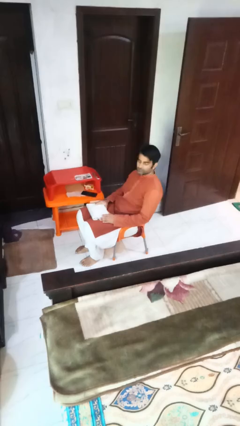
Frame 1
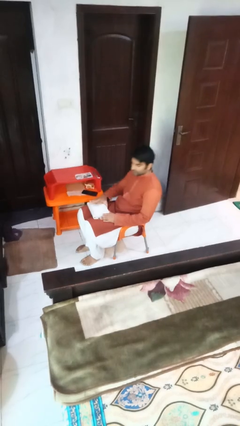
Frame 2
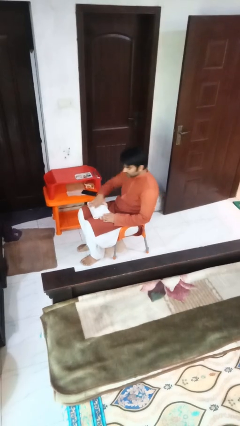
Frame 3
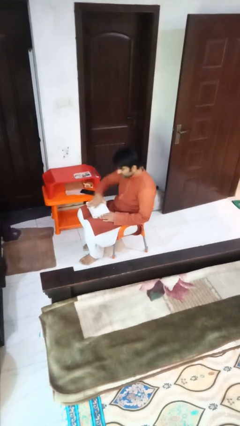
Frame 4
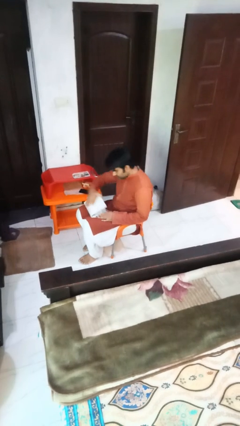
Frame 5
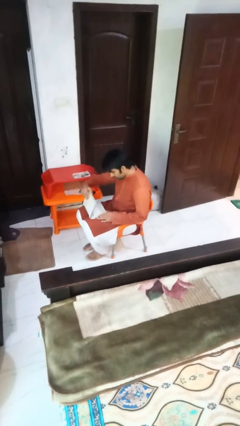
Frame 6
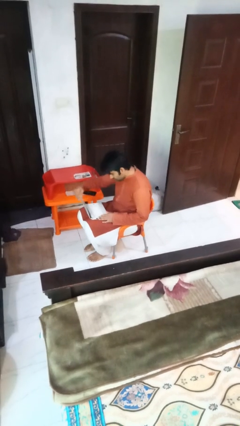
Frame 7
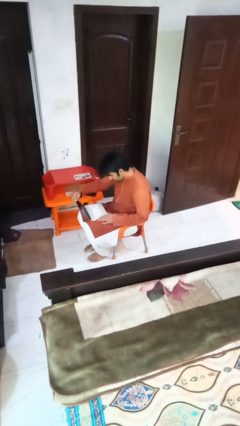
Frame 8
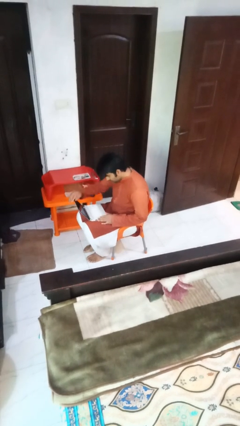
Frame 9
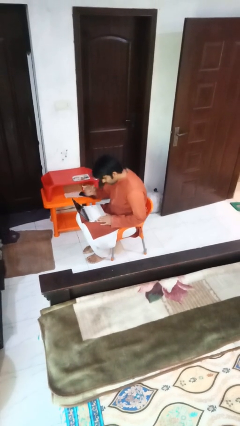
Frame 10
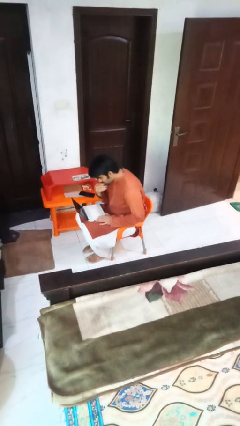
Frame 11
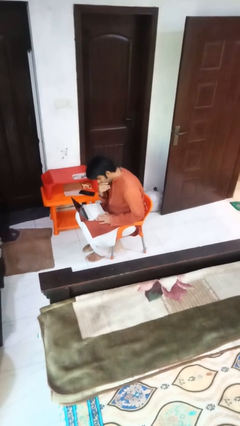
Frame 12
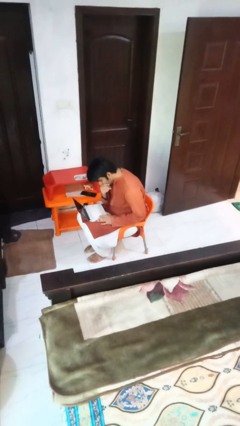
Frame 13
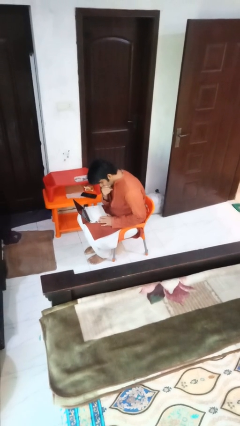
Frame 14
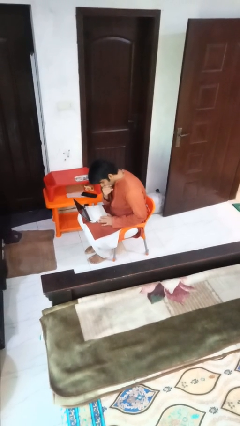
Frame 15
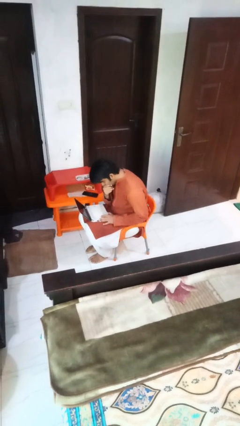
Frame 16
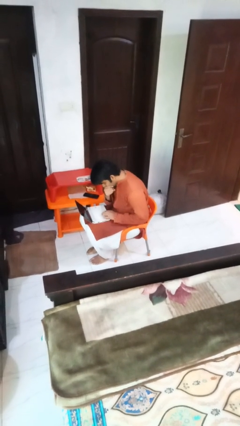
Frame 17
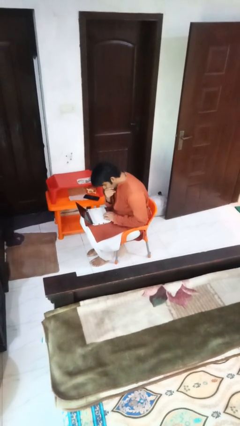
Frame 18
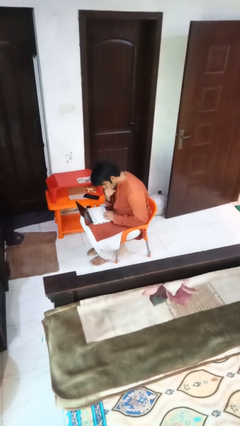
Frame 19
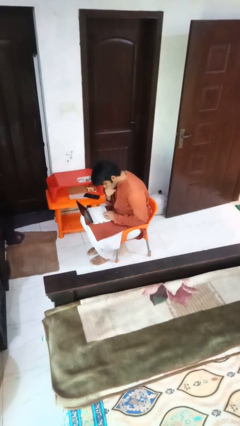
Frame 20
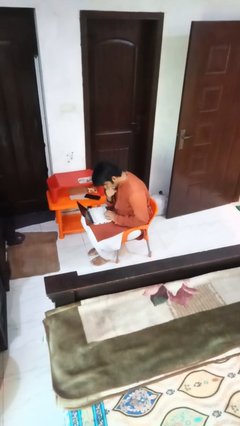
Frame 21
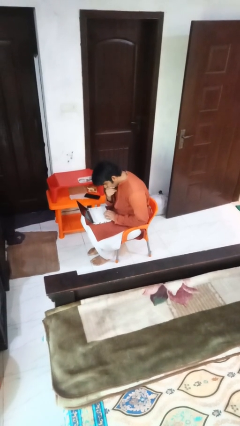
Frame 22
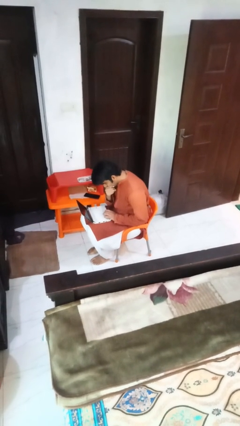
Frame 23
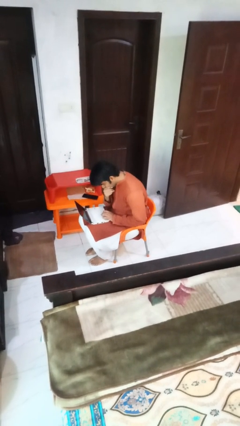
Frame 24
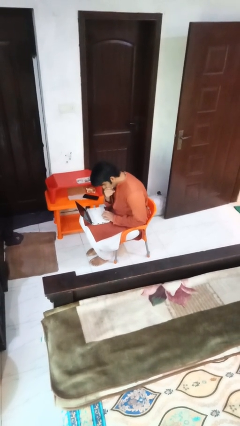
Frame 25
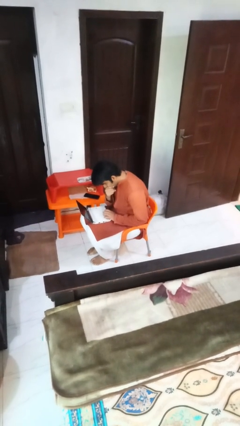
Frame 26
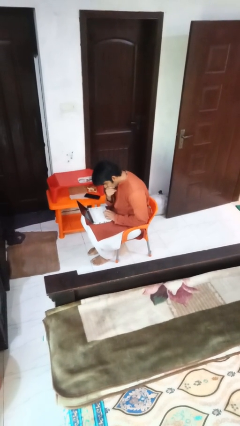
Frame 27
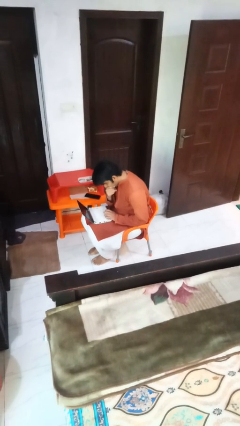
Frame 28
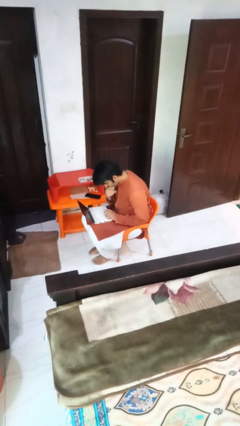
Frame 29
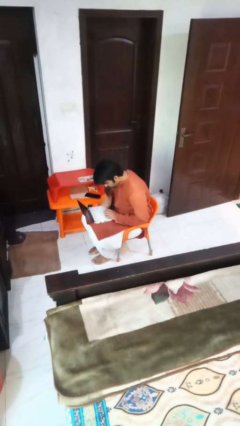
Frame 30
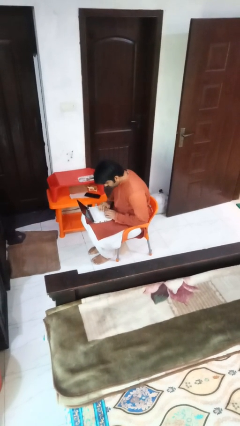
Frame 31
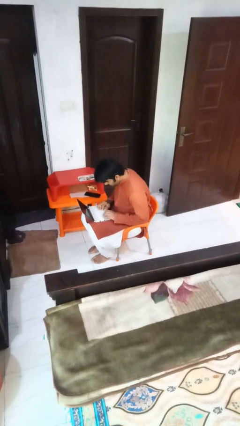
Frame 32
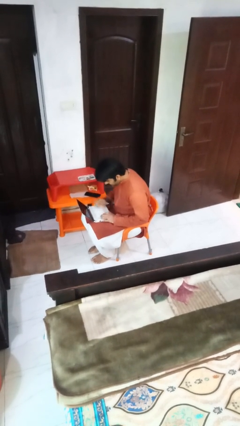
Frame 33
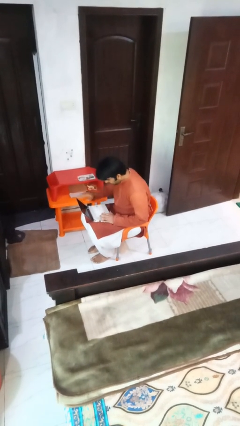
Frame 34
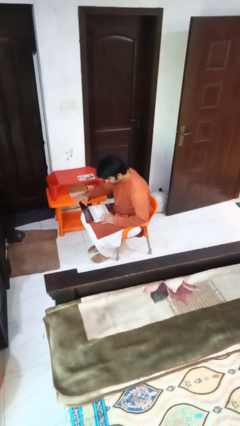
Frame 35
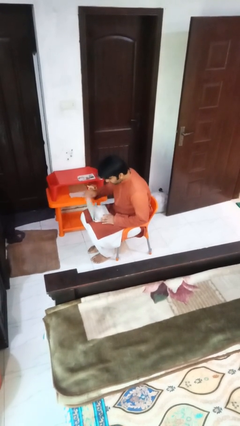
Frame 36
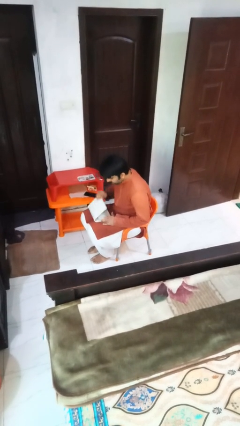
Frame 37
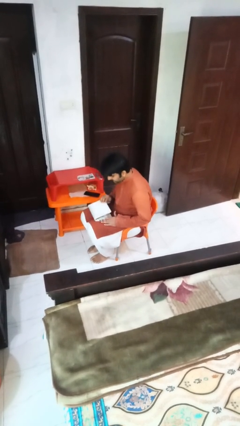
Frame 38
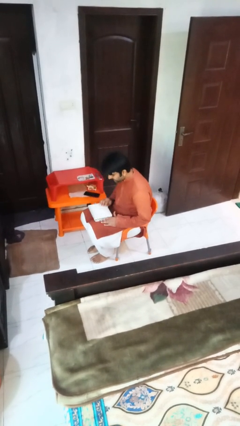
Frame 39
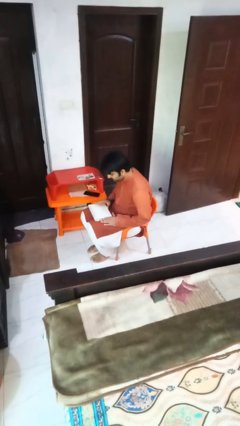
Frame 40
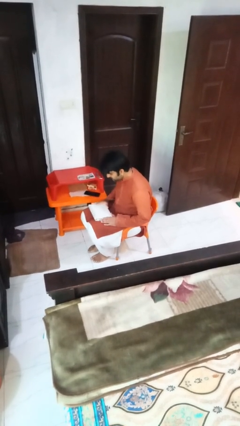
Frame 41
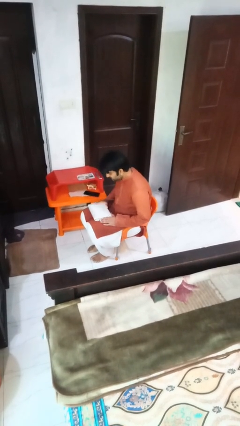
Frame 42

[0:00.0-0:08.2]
person interacts with laptop

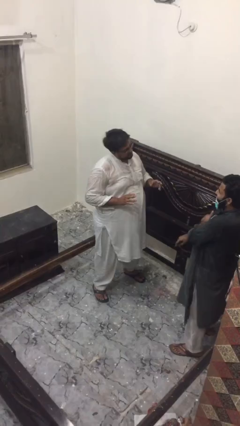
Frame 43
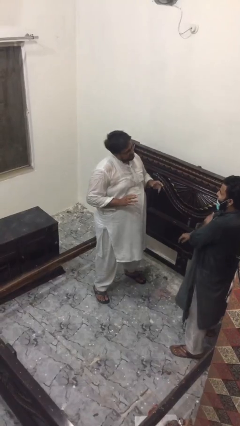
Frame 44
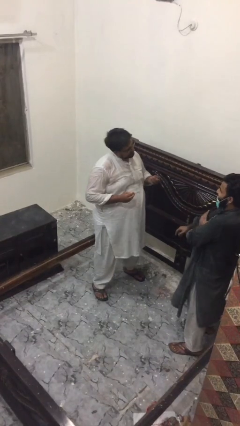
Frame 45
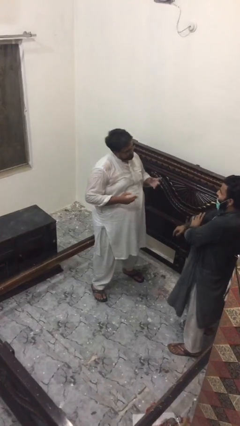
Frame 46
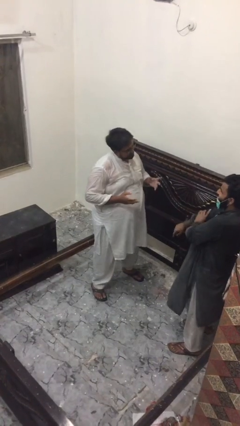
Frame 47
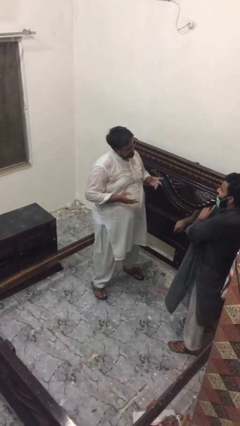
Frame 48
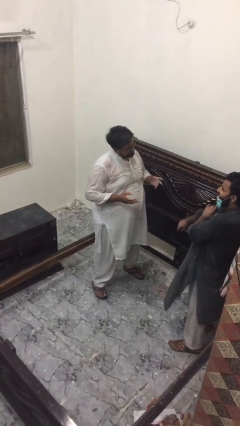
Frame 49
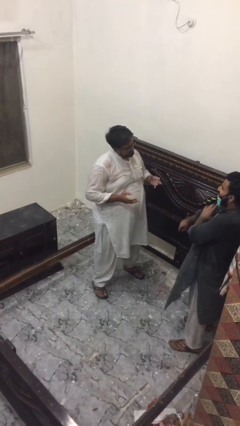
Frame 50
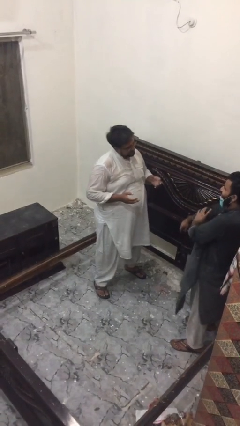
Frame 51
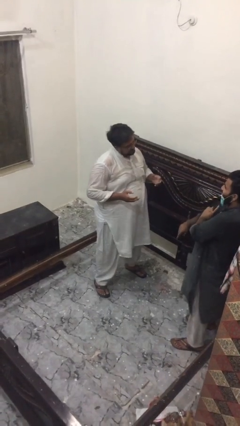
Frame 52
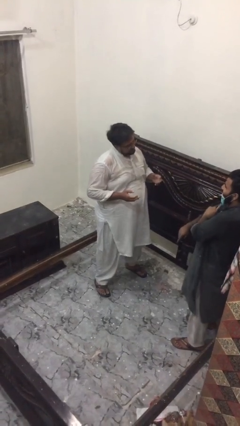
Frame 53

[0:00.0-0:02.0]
person talks to person

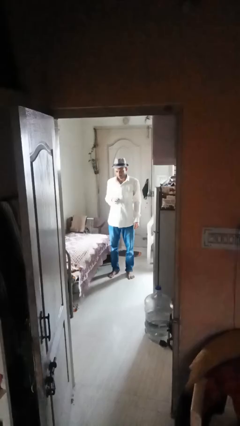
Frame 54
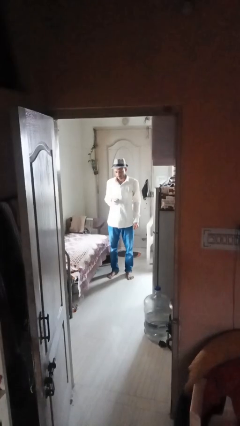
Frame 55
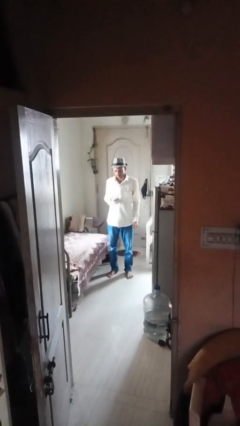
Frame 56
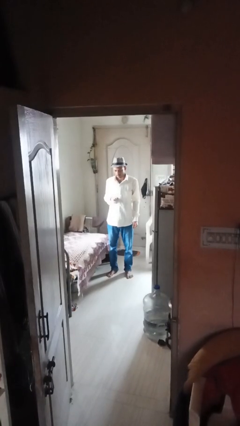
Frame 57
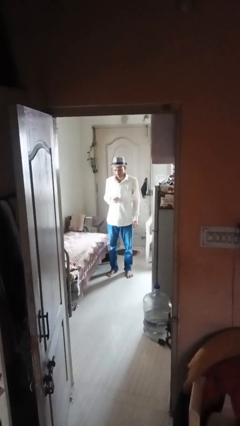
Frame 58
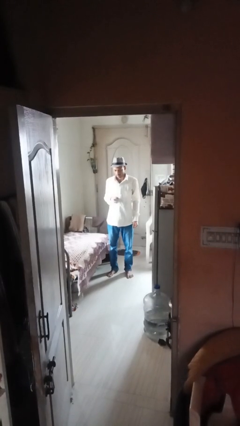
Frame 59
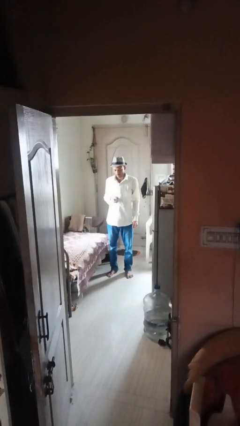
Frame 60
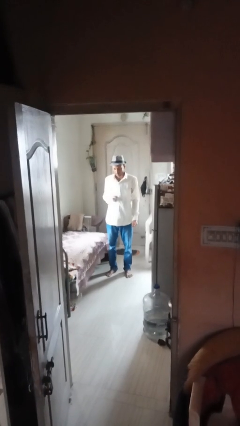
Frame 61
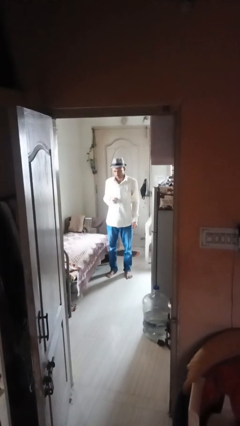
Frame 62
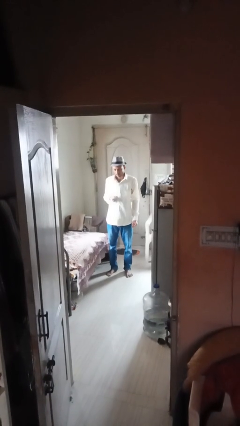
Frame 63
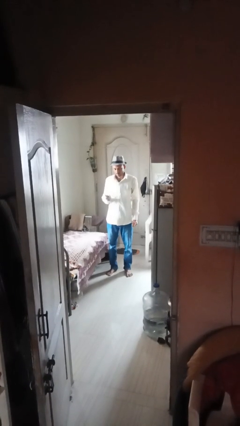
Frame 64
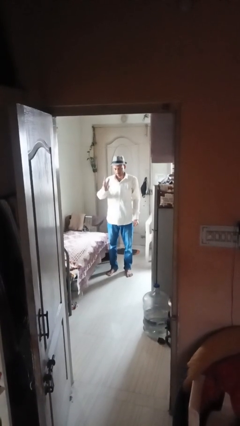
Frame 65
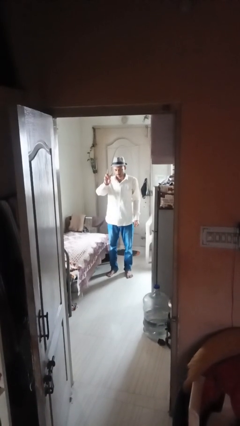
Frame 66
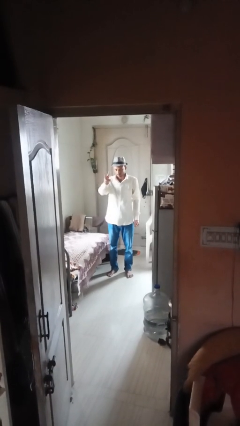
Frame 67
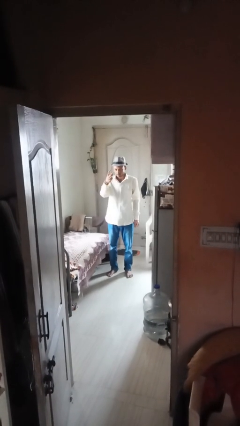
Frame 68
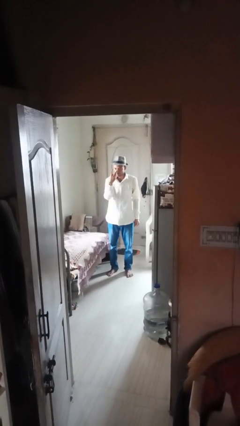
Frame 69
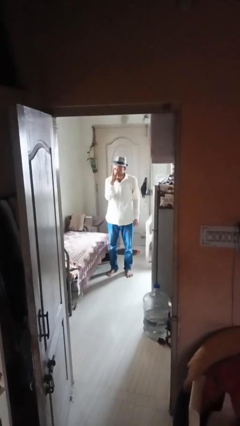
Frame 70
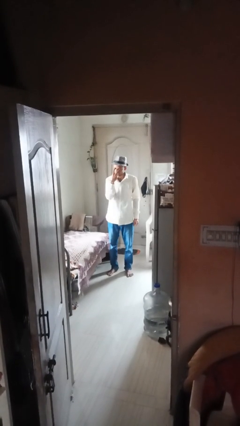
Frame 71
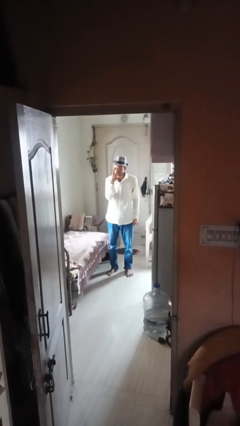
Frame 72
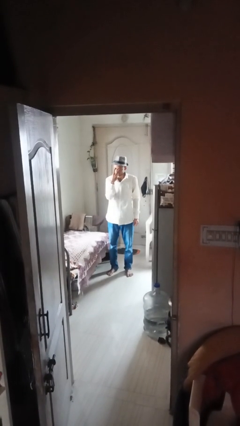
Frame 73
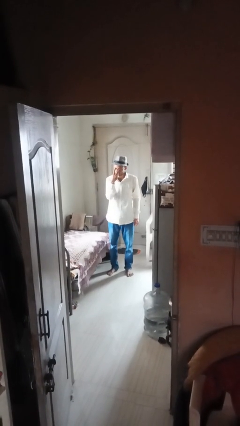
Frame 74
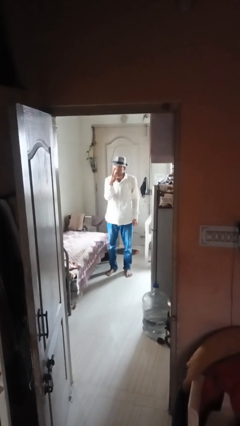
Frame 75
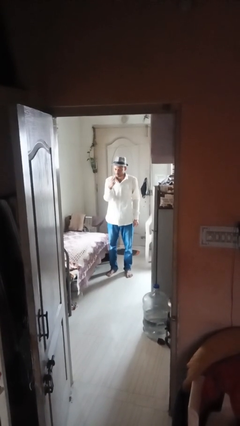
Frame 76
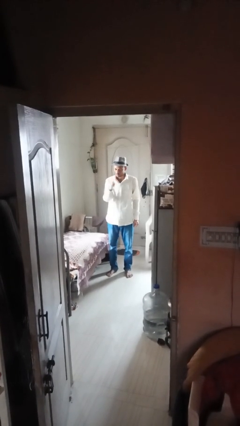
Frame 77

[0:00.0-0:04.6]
person gestures watch closely

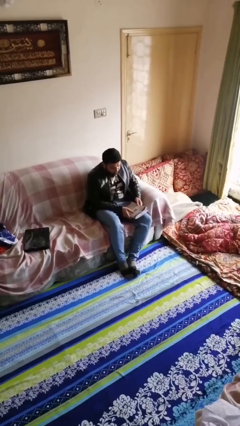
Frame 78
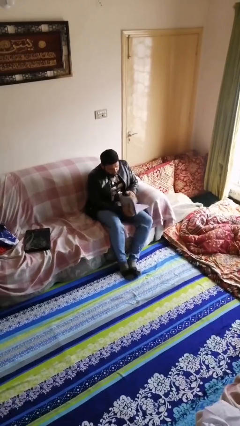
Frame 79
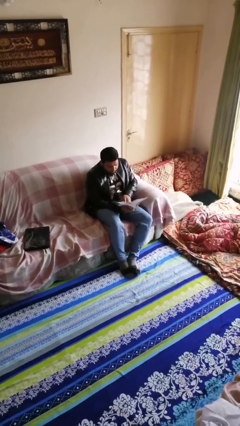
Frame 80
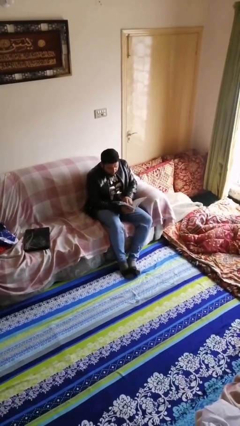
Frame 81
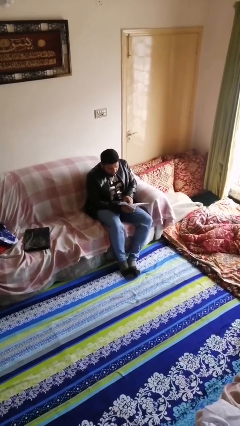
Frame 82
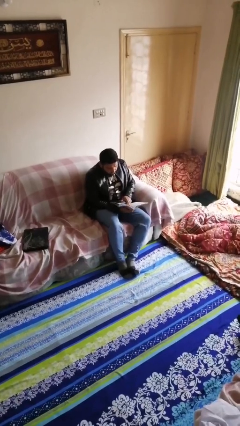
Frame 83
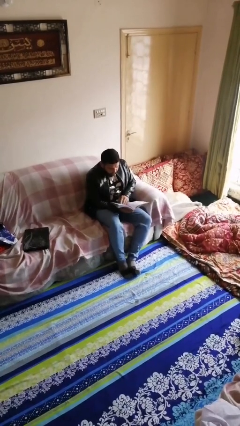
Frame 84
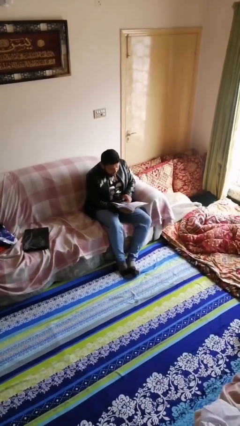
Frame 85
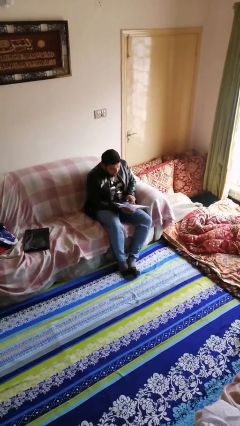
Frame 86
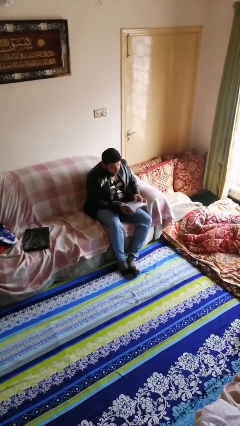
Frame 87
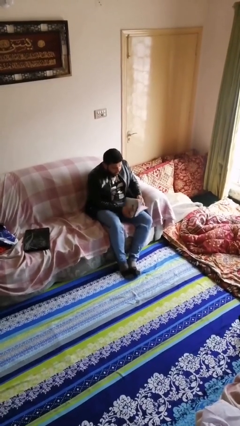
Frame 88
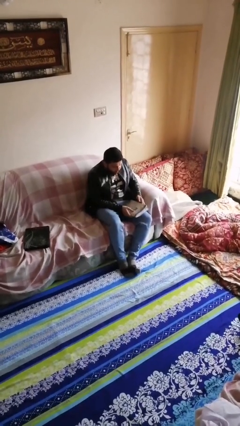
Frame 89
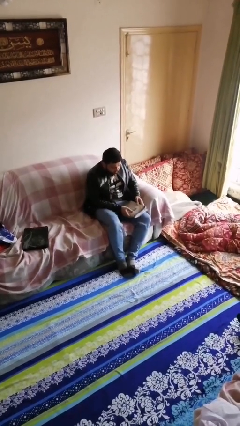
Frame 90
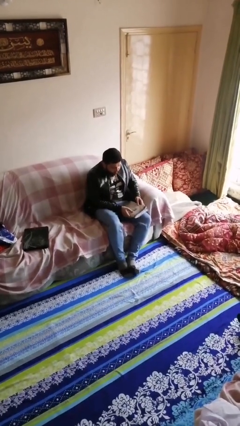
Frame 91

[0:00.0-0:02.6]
person reads document

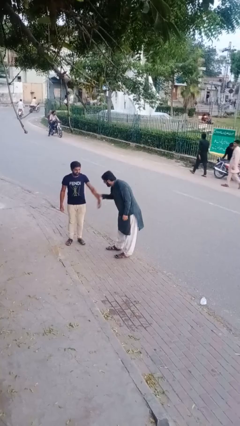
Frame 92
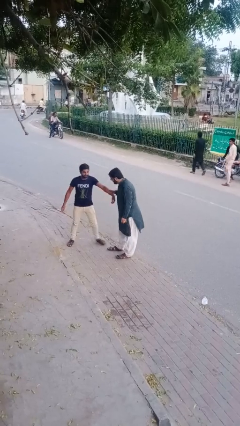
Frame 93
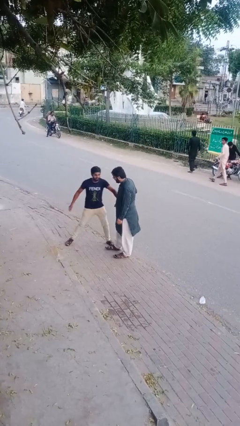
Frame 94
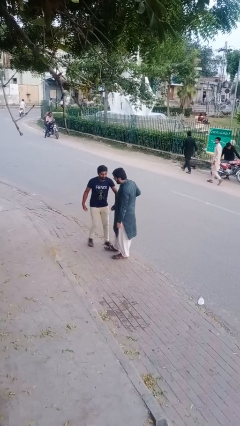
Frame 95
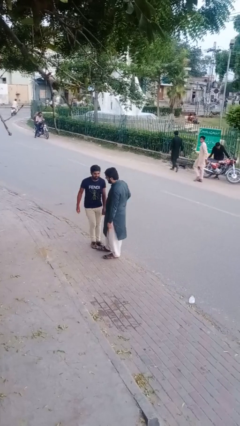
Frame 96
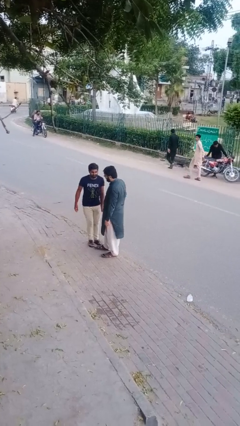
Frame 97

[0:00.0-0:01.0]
person grabs person by forearm
